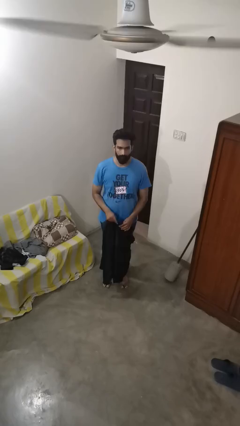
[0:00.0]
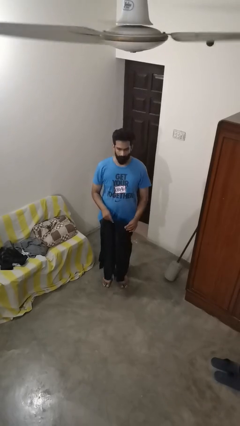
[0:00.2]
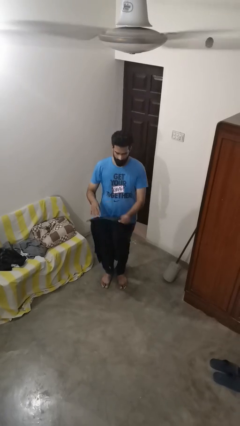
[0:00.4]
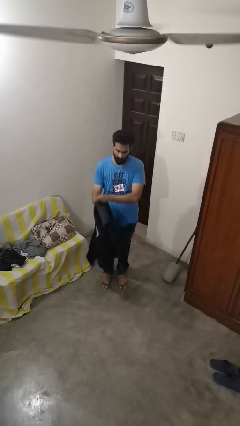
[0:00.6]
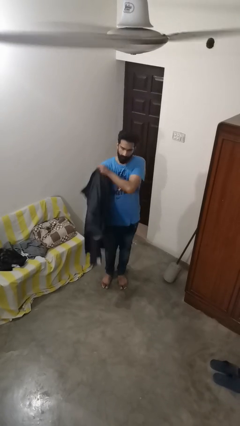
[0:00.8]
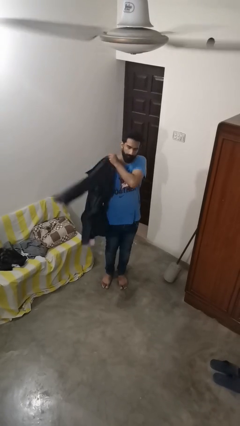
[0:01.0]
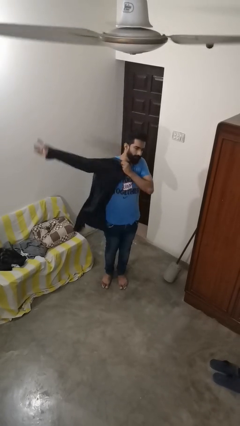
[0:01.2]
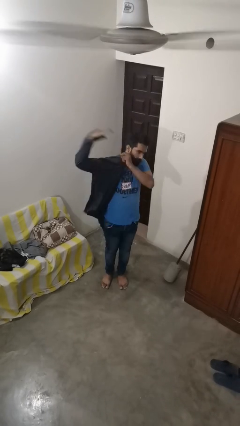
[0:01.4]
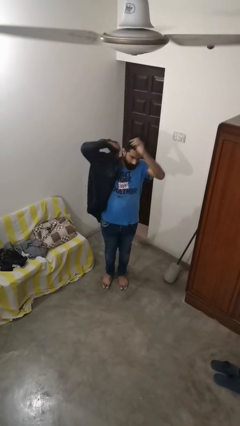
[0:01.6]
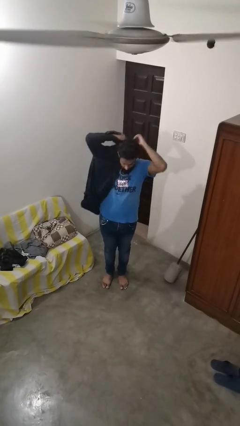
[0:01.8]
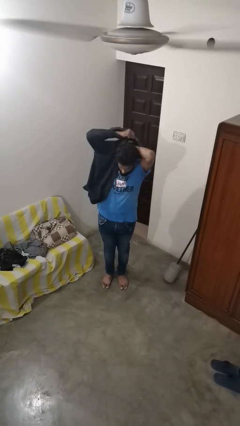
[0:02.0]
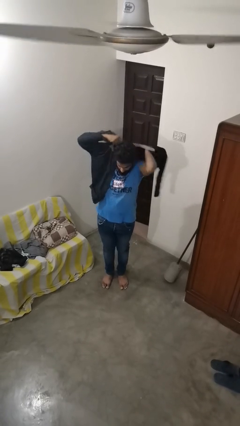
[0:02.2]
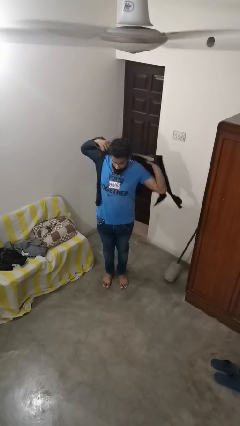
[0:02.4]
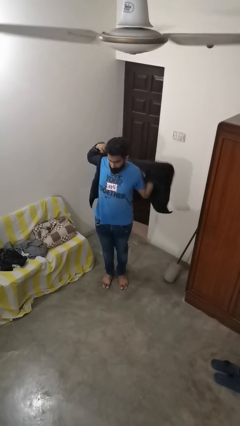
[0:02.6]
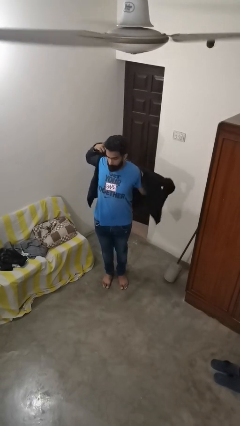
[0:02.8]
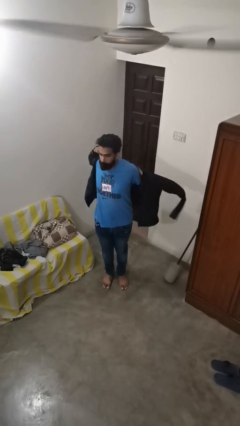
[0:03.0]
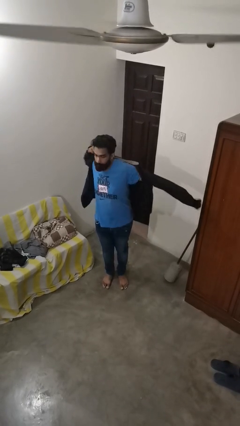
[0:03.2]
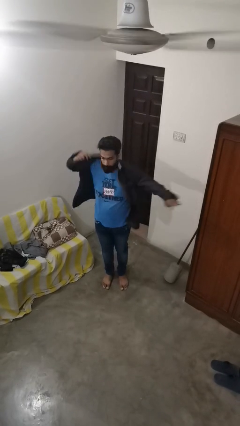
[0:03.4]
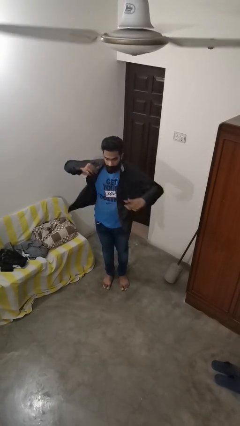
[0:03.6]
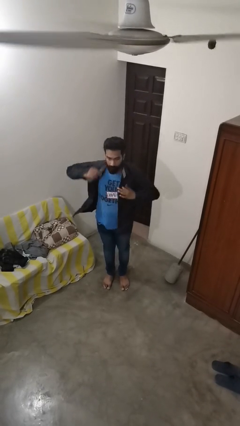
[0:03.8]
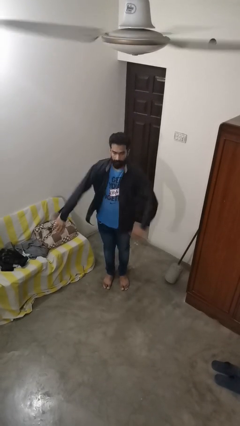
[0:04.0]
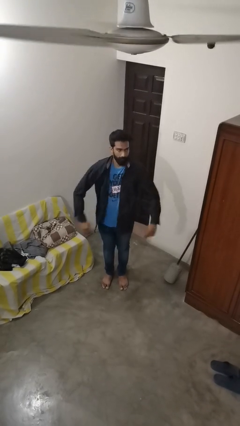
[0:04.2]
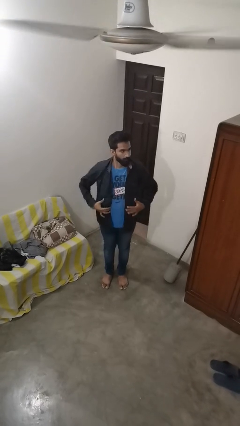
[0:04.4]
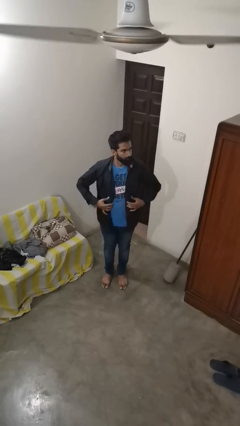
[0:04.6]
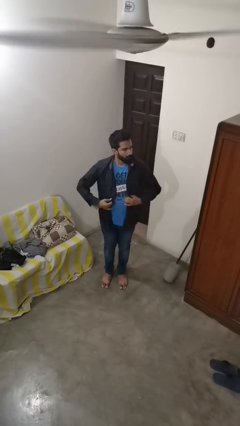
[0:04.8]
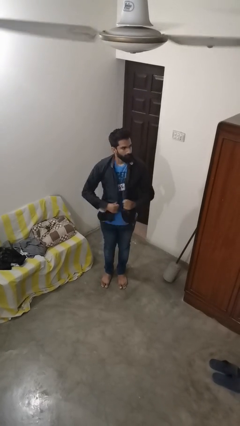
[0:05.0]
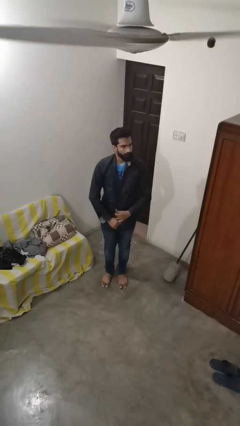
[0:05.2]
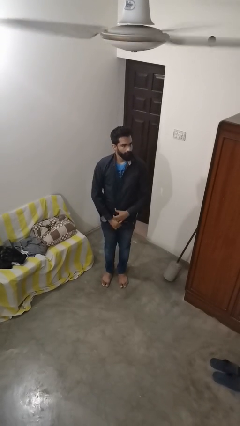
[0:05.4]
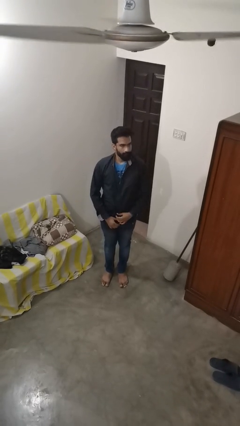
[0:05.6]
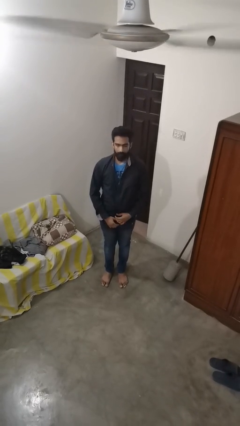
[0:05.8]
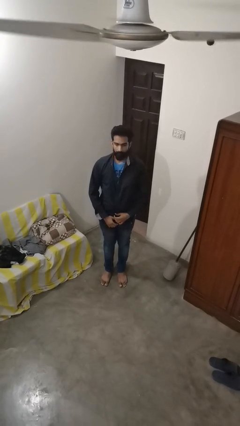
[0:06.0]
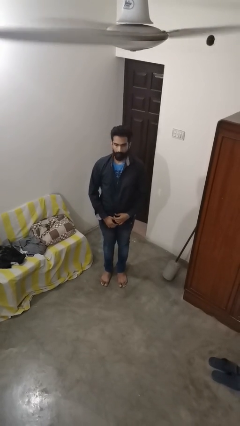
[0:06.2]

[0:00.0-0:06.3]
person puts on shirt

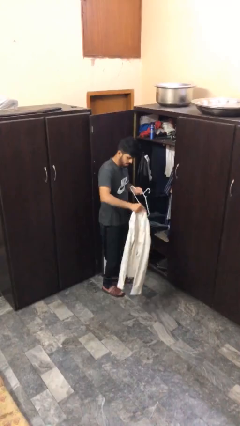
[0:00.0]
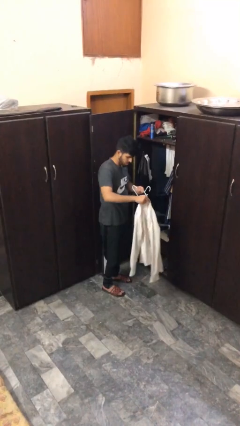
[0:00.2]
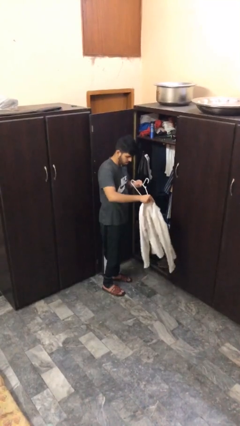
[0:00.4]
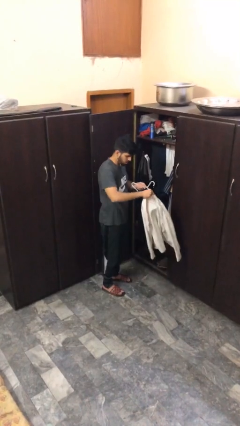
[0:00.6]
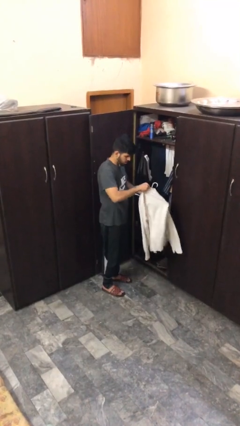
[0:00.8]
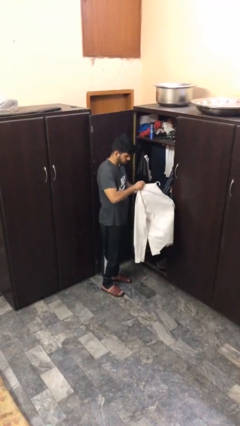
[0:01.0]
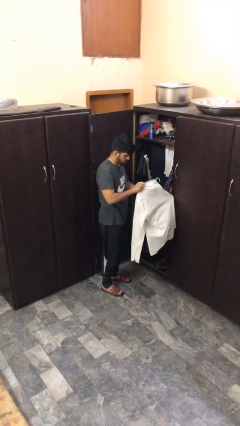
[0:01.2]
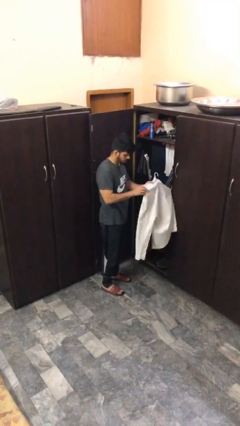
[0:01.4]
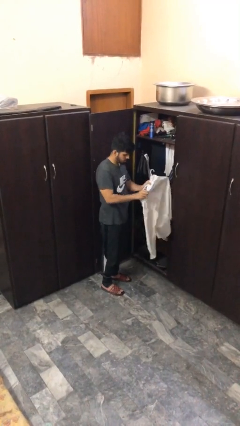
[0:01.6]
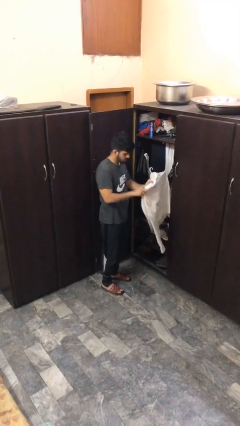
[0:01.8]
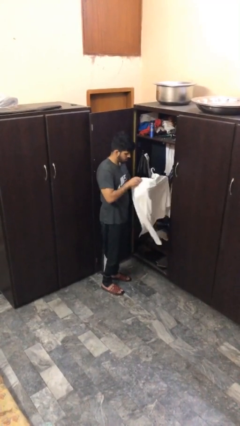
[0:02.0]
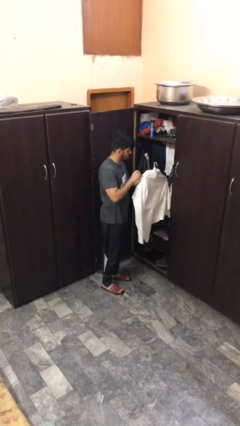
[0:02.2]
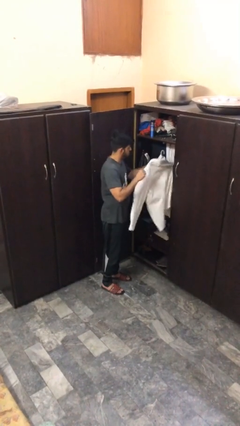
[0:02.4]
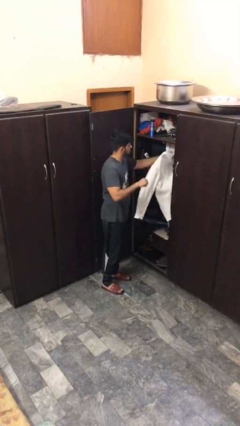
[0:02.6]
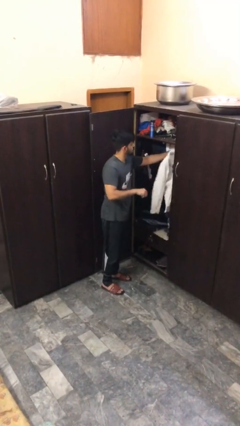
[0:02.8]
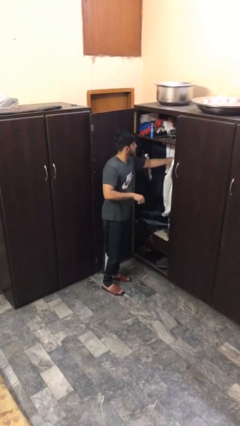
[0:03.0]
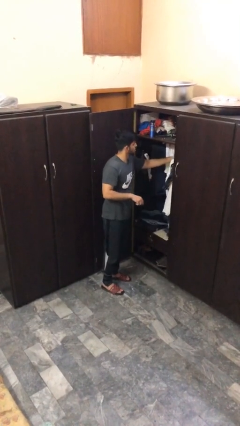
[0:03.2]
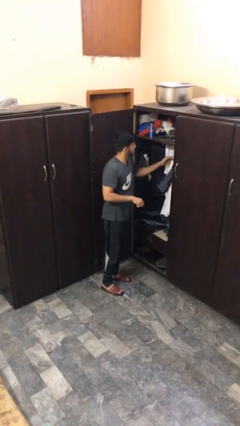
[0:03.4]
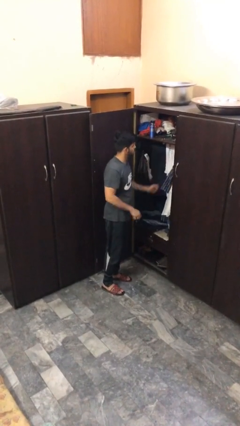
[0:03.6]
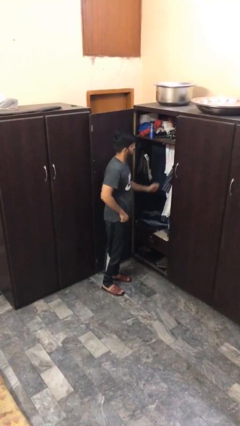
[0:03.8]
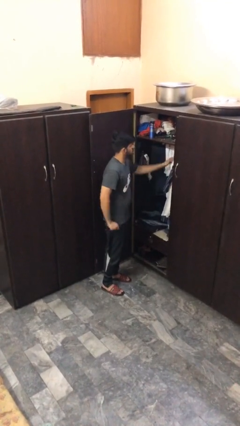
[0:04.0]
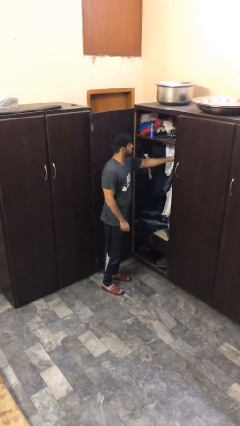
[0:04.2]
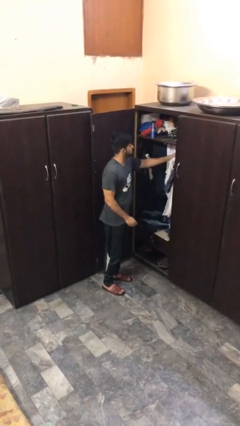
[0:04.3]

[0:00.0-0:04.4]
person puts clothes into closet

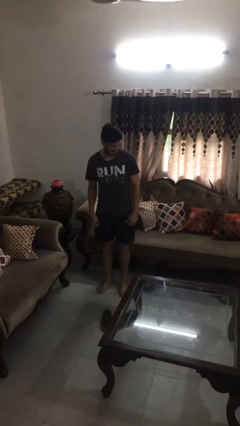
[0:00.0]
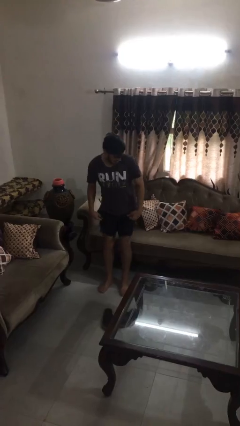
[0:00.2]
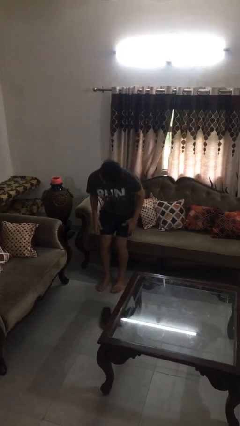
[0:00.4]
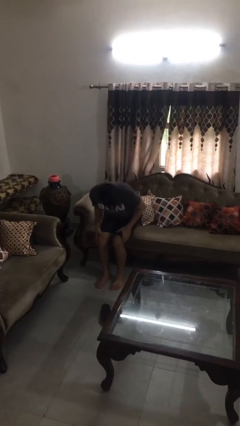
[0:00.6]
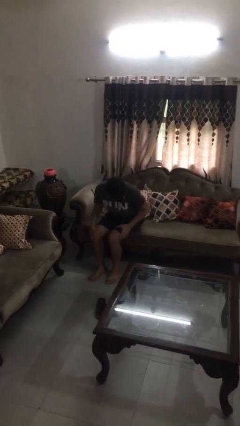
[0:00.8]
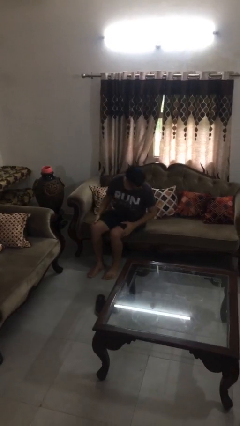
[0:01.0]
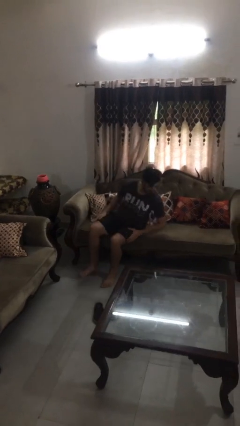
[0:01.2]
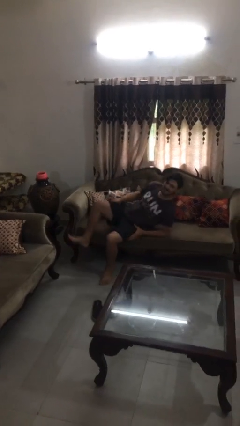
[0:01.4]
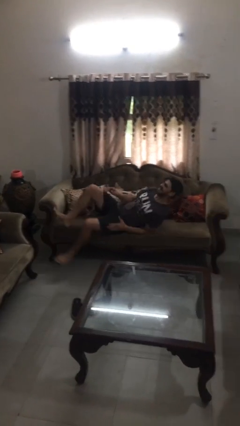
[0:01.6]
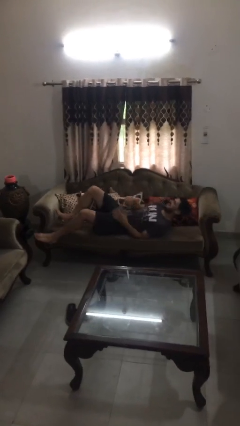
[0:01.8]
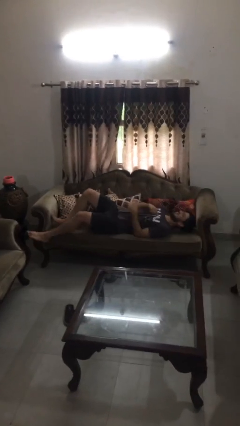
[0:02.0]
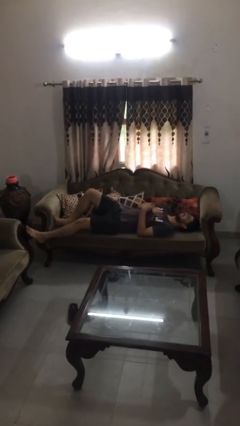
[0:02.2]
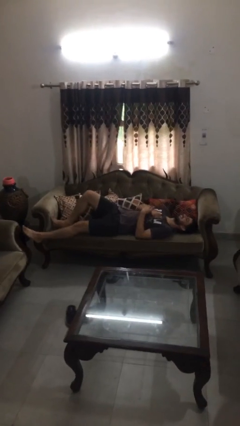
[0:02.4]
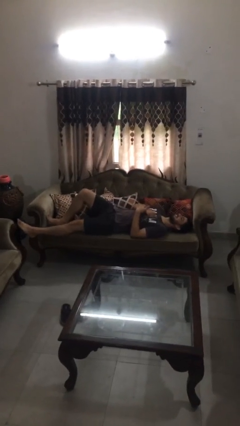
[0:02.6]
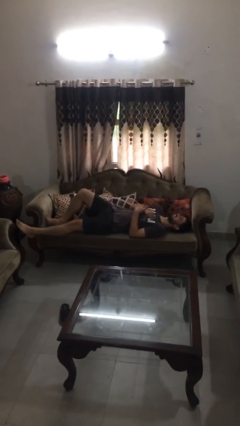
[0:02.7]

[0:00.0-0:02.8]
person lies down on couch

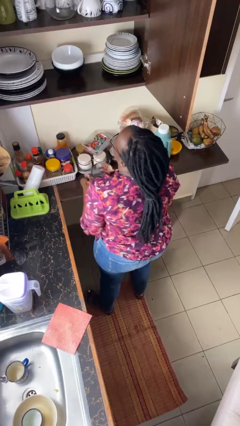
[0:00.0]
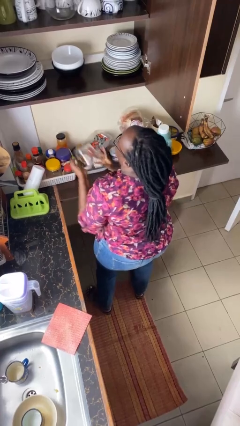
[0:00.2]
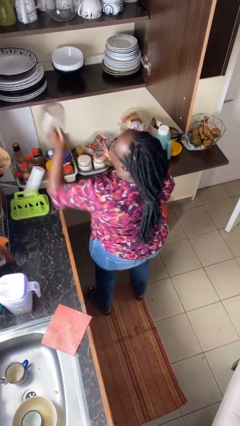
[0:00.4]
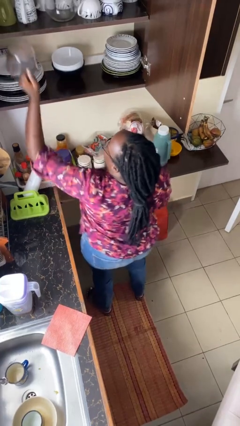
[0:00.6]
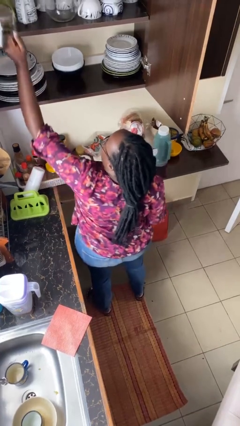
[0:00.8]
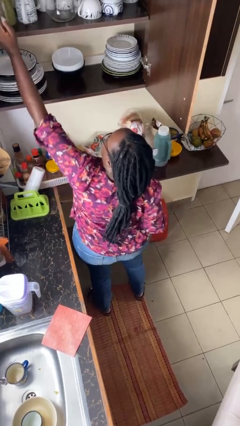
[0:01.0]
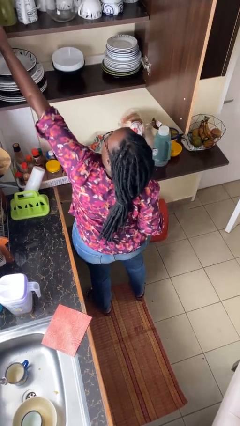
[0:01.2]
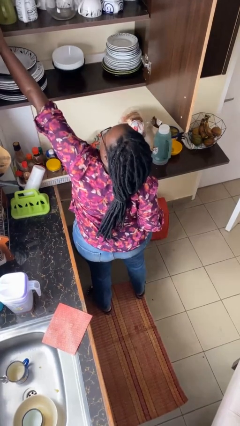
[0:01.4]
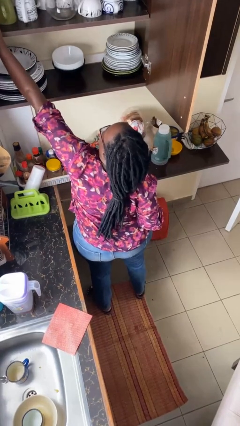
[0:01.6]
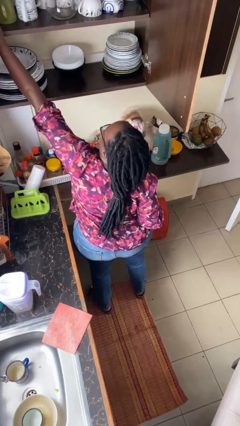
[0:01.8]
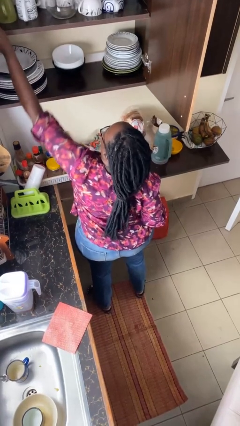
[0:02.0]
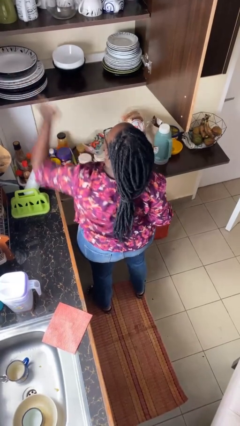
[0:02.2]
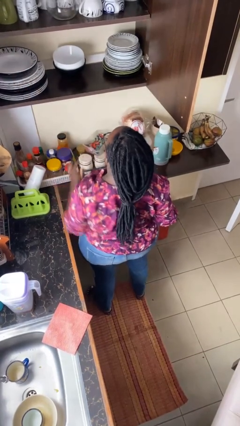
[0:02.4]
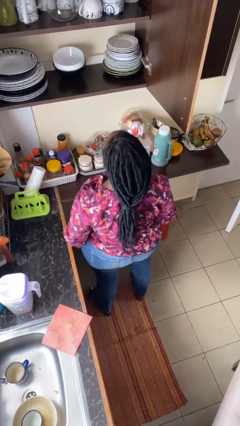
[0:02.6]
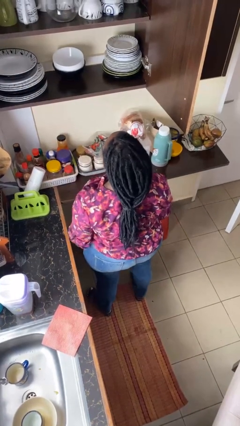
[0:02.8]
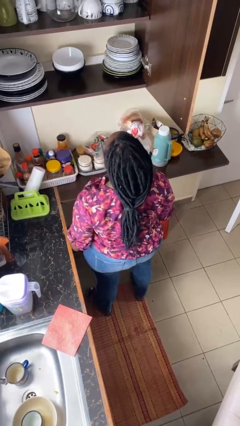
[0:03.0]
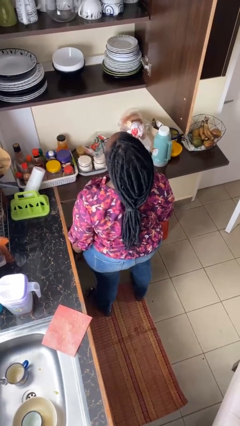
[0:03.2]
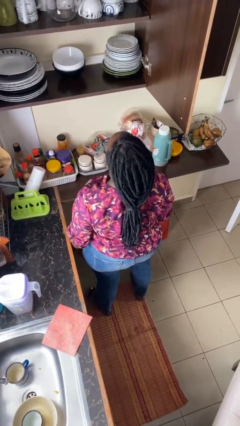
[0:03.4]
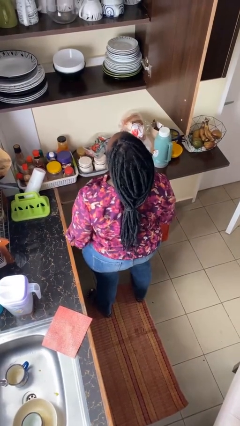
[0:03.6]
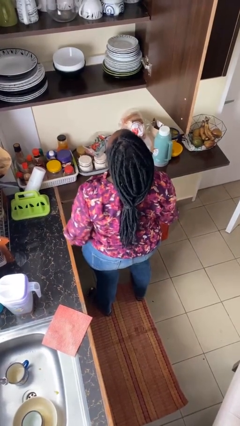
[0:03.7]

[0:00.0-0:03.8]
person puts object in cabinet

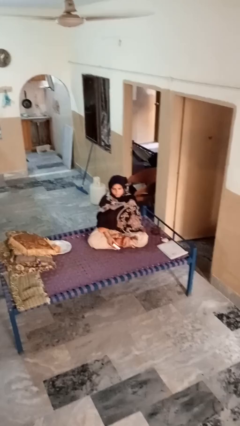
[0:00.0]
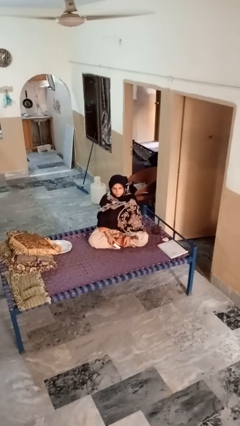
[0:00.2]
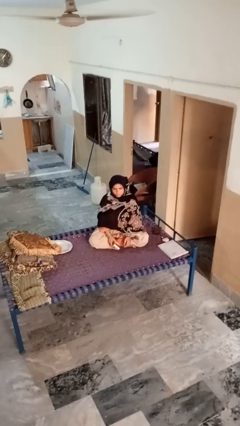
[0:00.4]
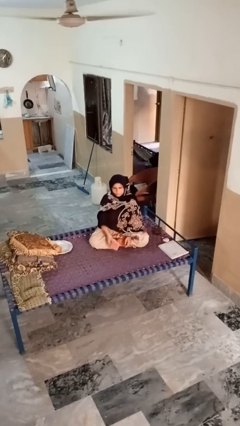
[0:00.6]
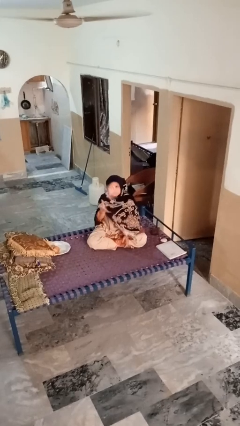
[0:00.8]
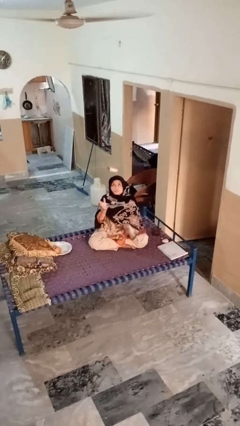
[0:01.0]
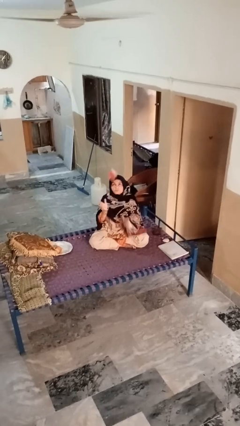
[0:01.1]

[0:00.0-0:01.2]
person drops object
